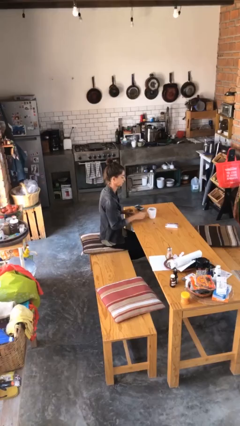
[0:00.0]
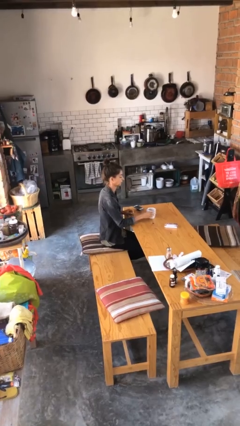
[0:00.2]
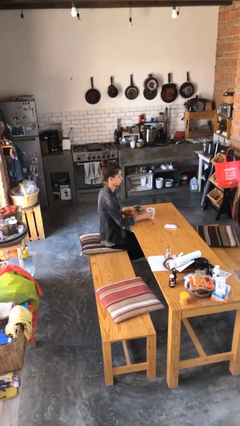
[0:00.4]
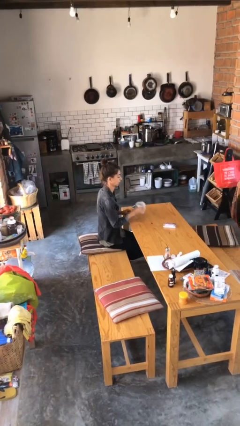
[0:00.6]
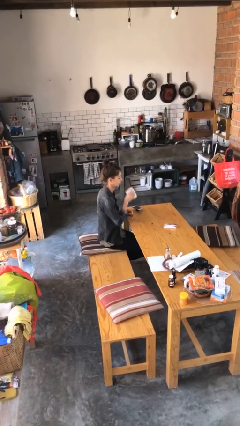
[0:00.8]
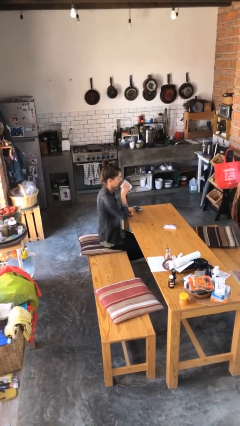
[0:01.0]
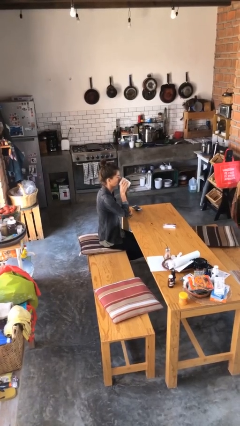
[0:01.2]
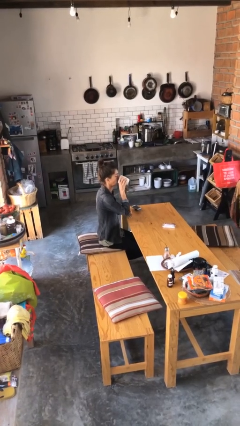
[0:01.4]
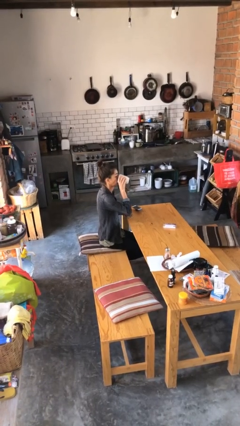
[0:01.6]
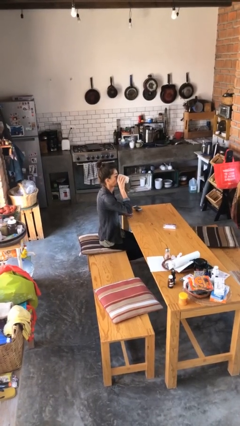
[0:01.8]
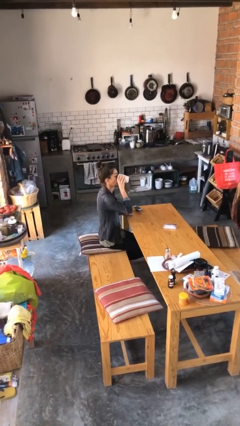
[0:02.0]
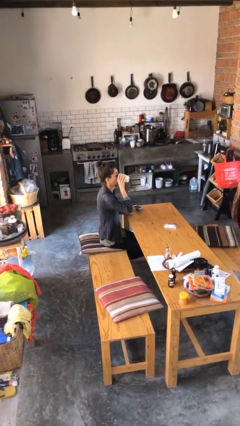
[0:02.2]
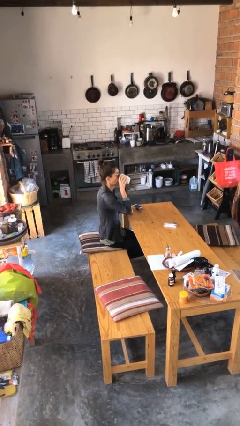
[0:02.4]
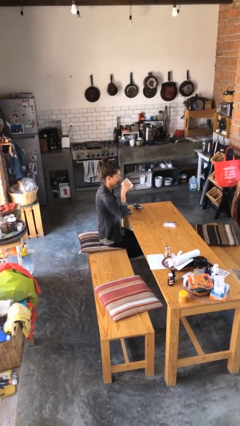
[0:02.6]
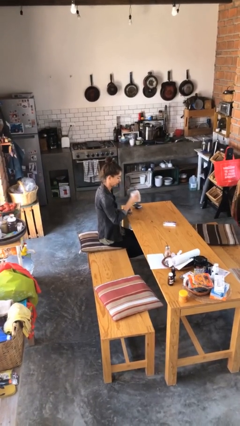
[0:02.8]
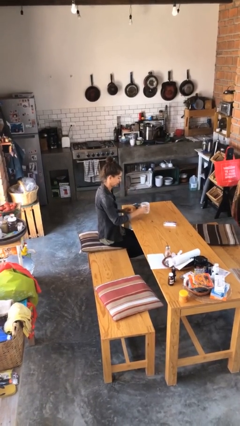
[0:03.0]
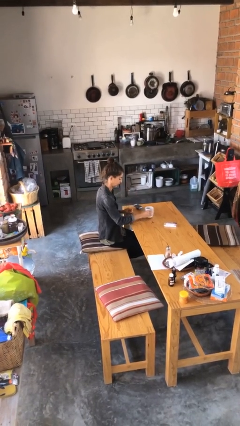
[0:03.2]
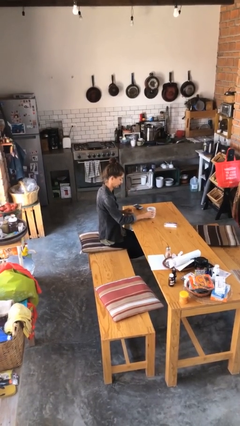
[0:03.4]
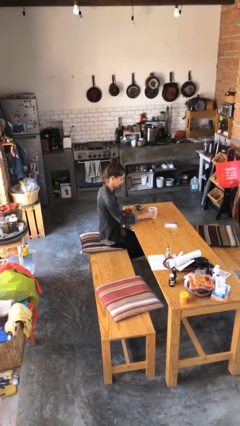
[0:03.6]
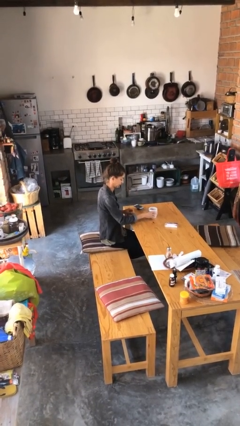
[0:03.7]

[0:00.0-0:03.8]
person drinks from cup

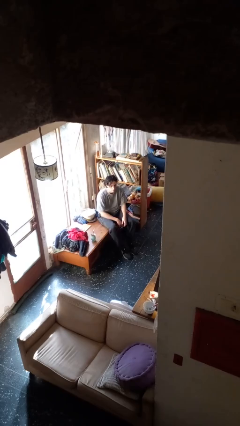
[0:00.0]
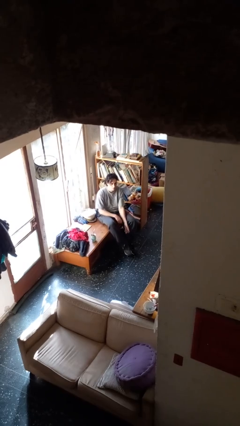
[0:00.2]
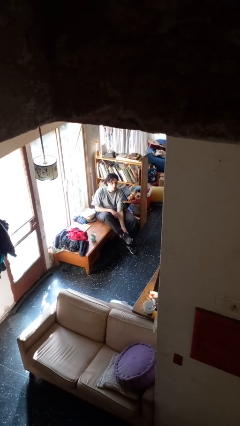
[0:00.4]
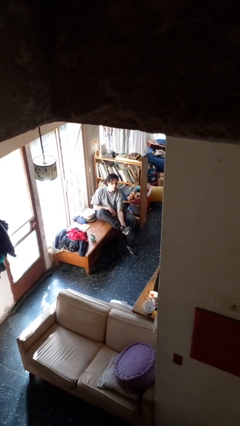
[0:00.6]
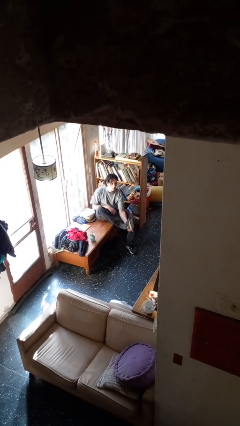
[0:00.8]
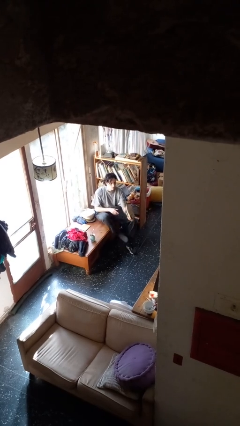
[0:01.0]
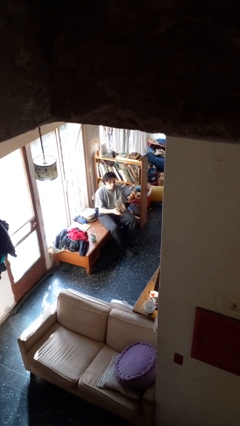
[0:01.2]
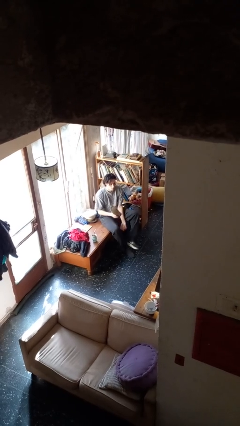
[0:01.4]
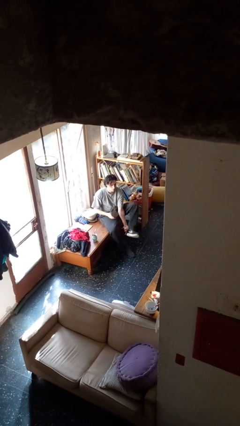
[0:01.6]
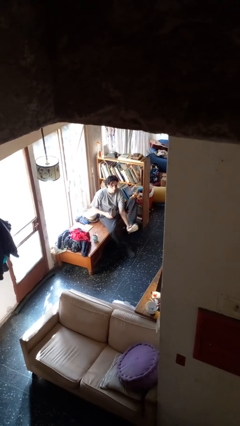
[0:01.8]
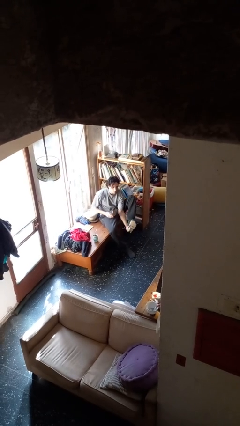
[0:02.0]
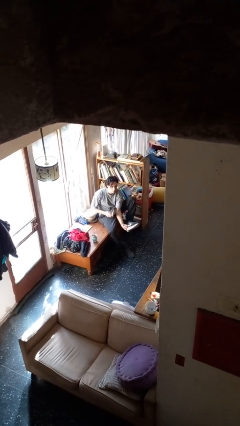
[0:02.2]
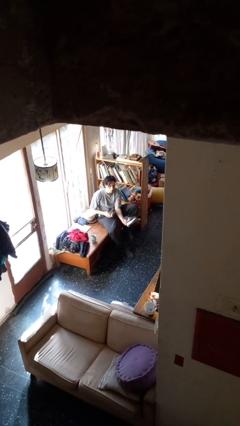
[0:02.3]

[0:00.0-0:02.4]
person takes off shoes

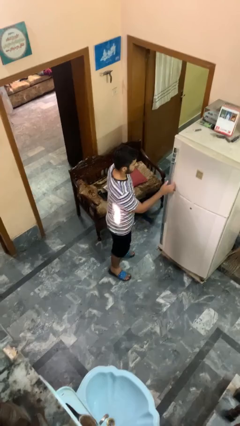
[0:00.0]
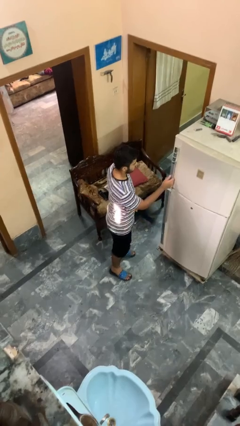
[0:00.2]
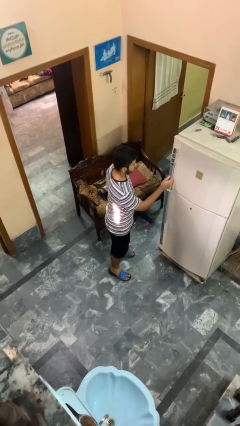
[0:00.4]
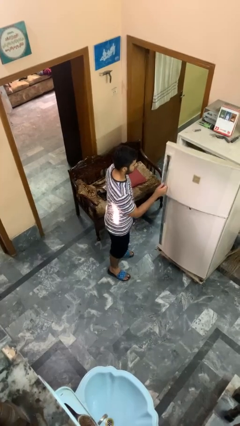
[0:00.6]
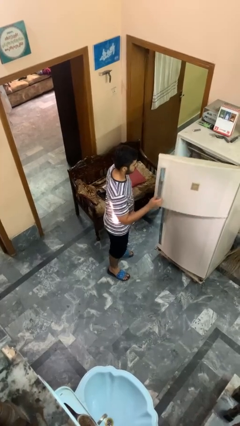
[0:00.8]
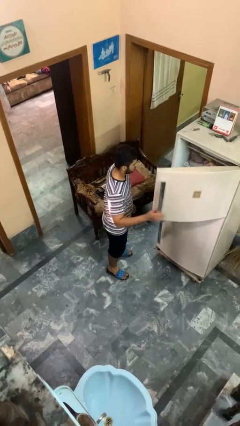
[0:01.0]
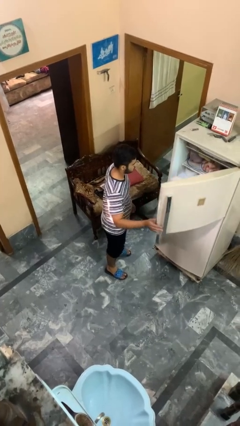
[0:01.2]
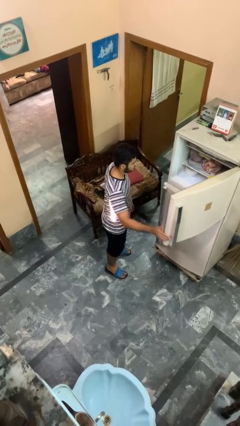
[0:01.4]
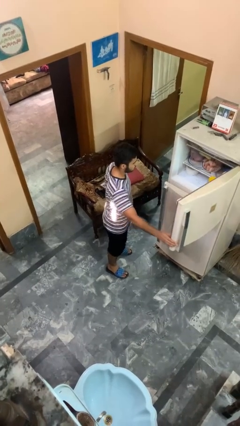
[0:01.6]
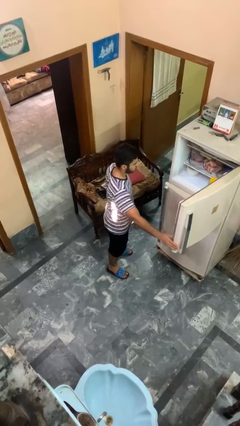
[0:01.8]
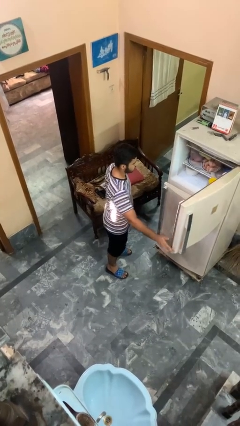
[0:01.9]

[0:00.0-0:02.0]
person opens refrigerator

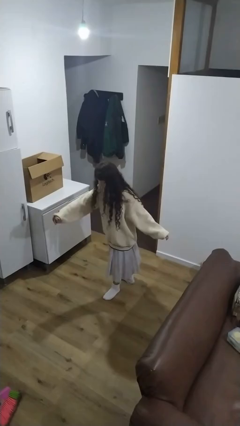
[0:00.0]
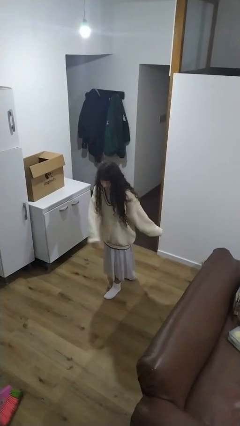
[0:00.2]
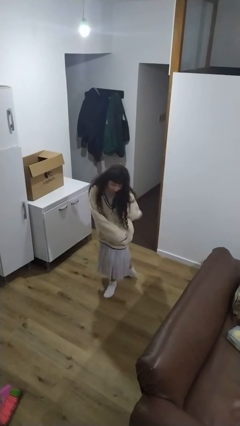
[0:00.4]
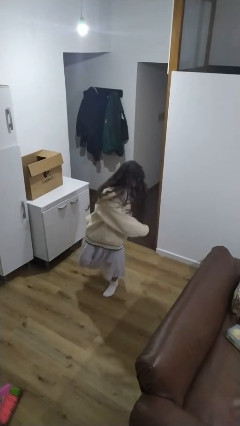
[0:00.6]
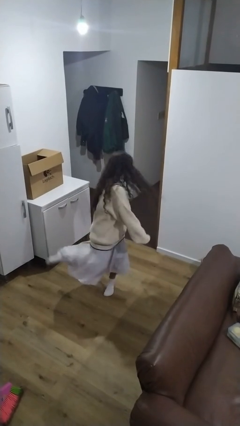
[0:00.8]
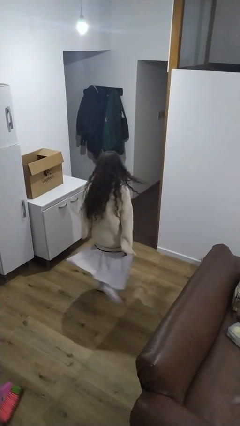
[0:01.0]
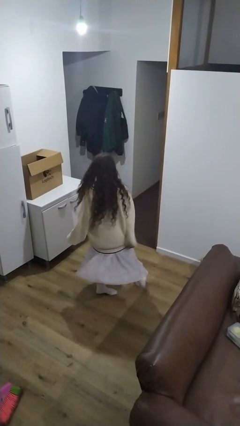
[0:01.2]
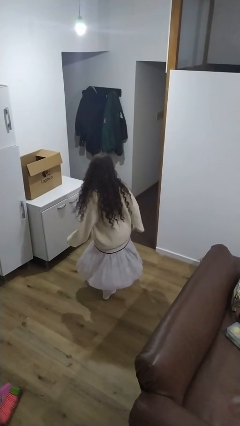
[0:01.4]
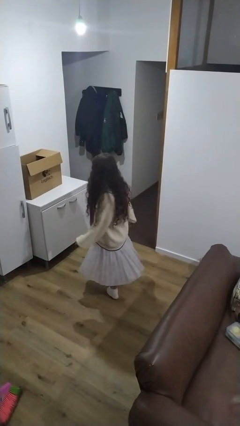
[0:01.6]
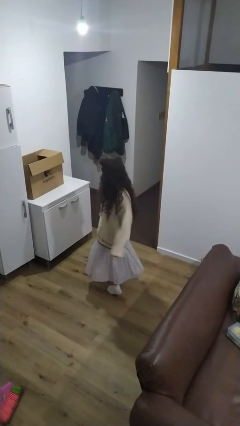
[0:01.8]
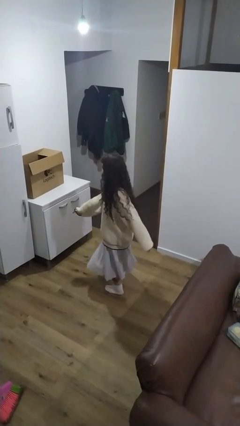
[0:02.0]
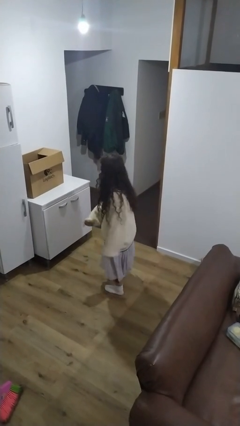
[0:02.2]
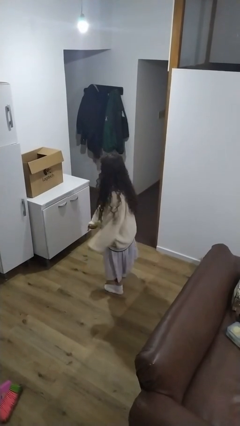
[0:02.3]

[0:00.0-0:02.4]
person twirls

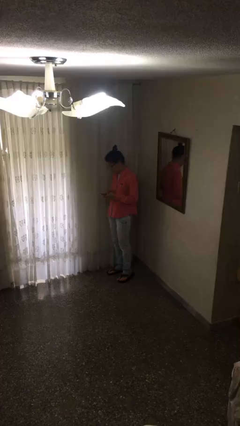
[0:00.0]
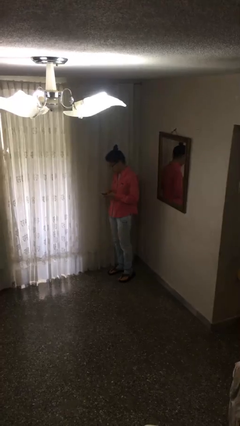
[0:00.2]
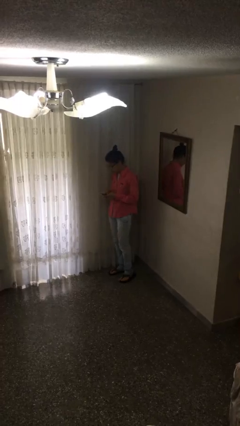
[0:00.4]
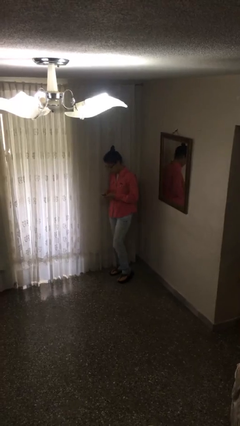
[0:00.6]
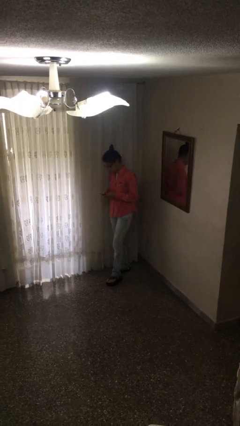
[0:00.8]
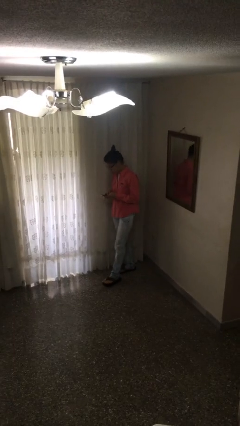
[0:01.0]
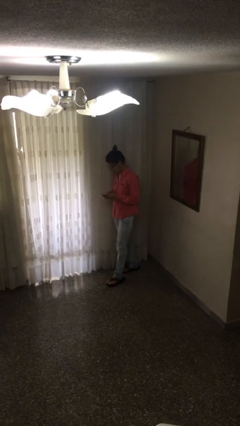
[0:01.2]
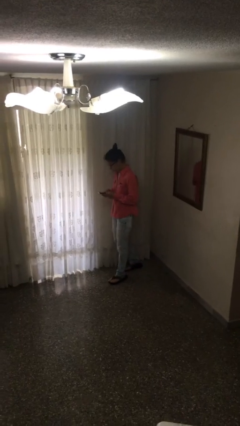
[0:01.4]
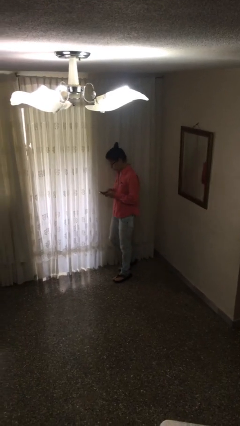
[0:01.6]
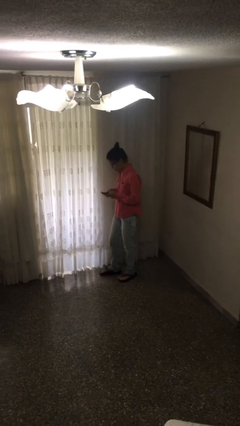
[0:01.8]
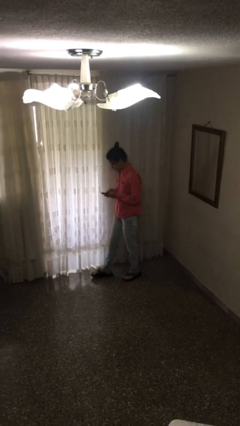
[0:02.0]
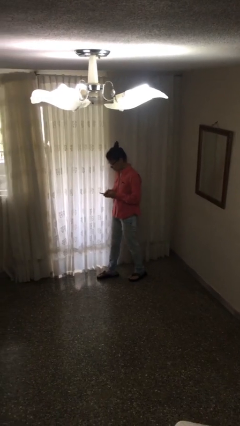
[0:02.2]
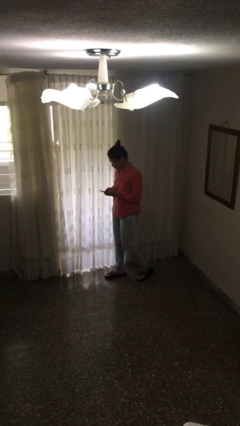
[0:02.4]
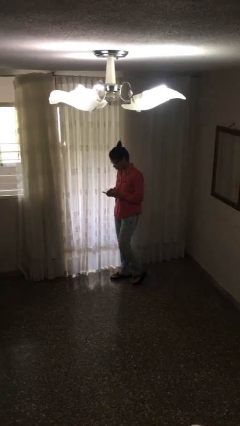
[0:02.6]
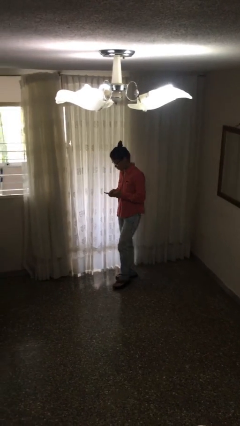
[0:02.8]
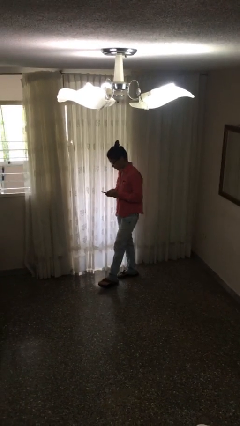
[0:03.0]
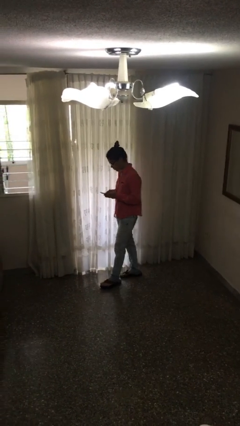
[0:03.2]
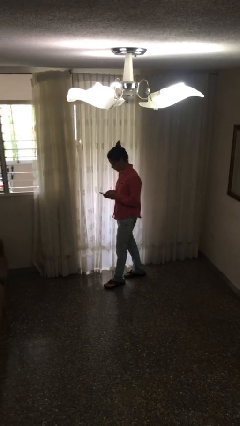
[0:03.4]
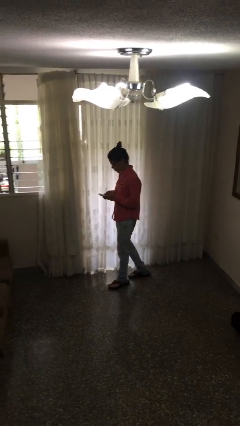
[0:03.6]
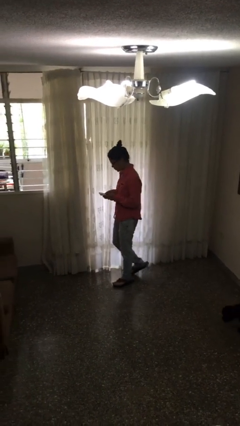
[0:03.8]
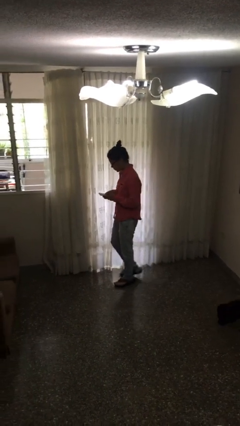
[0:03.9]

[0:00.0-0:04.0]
person texts on phone

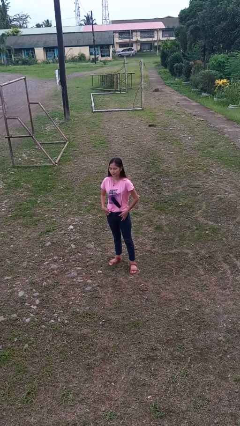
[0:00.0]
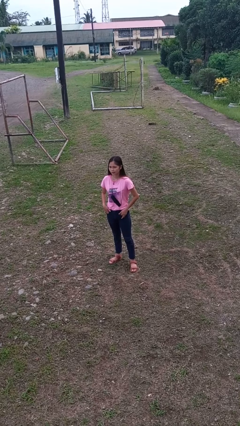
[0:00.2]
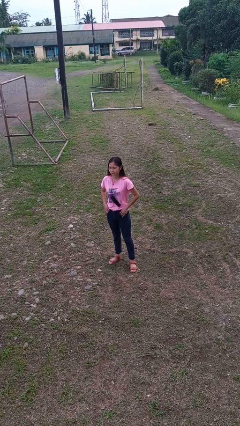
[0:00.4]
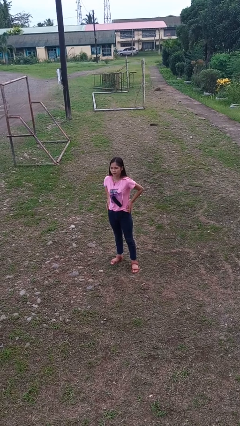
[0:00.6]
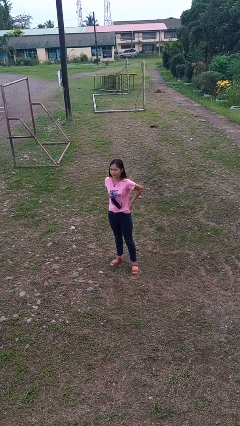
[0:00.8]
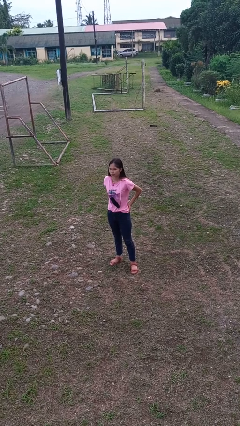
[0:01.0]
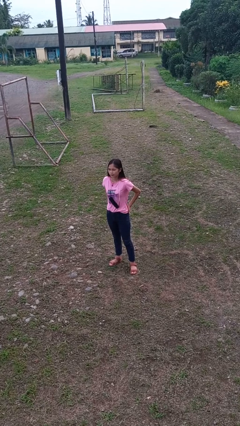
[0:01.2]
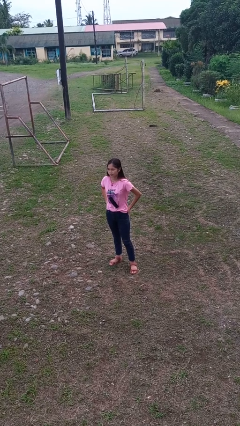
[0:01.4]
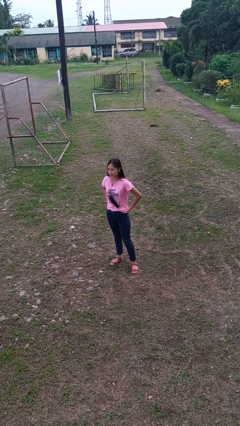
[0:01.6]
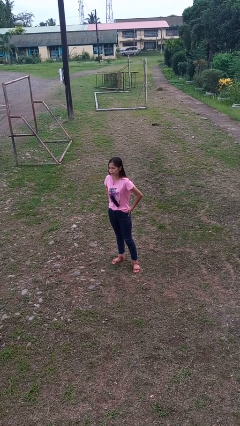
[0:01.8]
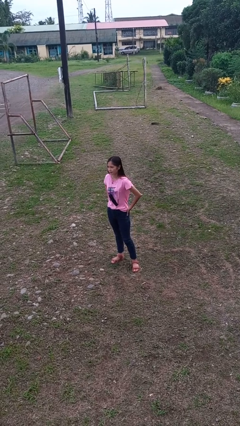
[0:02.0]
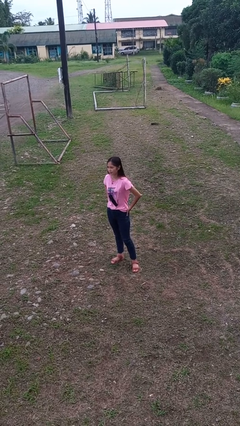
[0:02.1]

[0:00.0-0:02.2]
person puts hands in back pockets

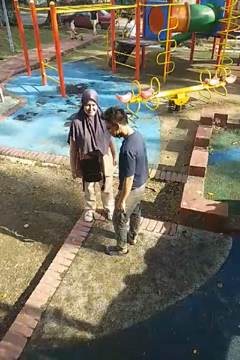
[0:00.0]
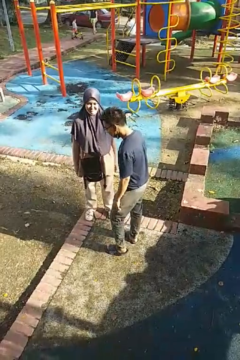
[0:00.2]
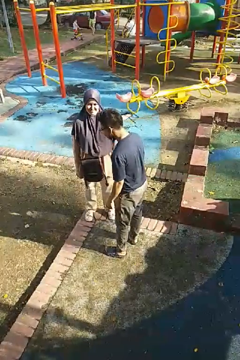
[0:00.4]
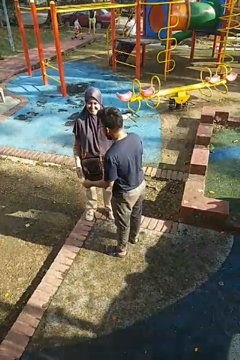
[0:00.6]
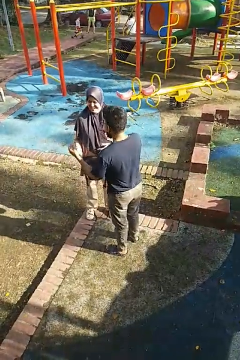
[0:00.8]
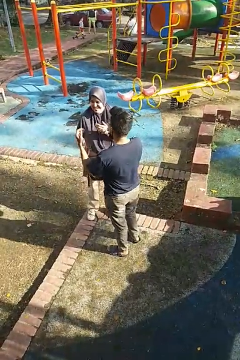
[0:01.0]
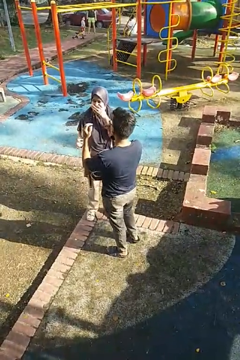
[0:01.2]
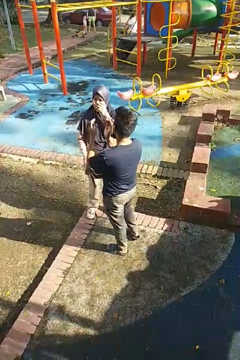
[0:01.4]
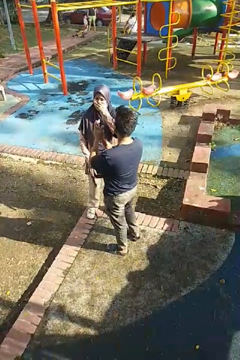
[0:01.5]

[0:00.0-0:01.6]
person laughs with person
